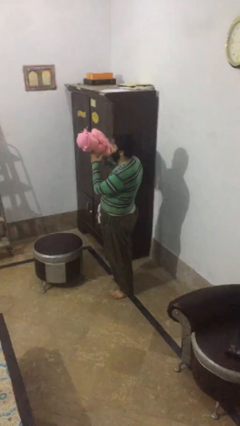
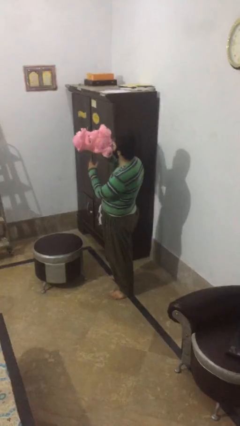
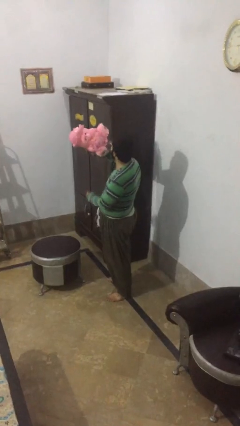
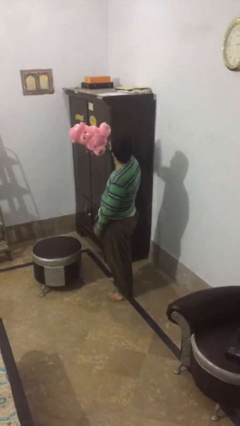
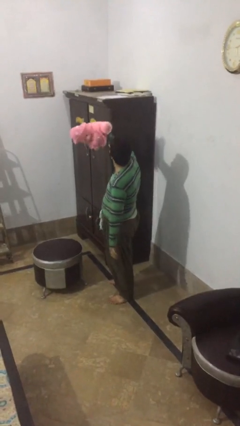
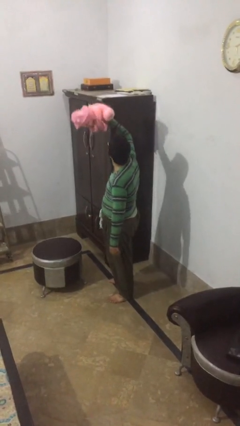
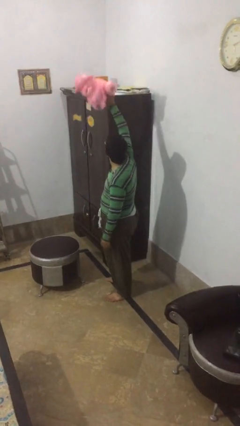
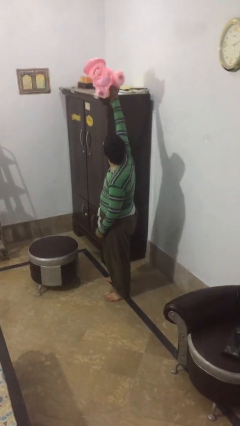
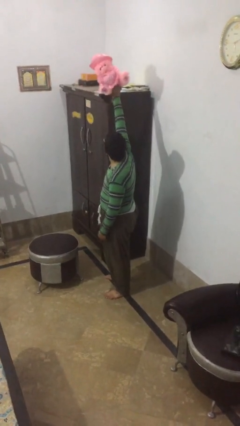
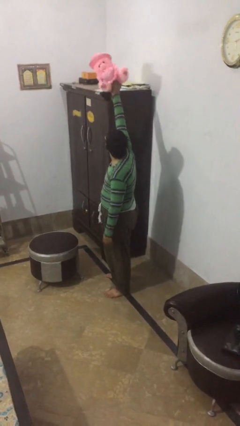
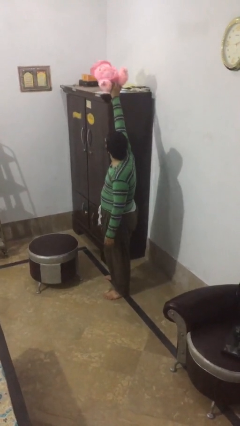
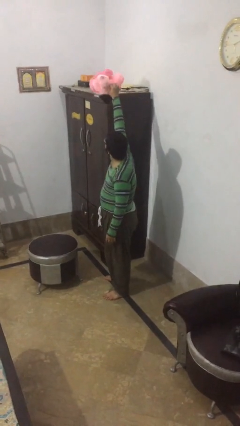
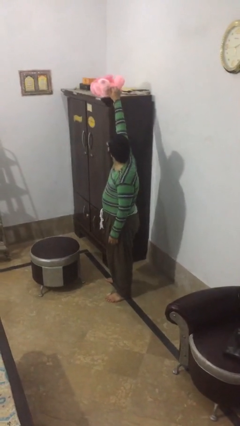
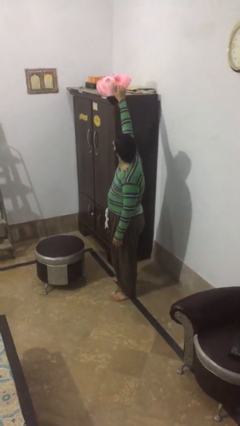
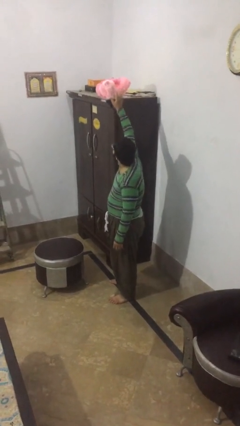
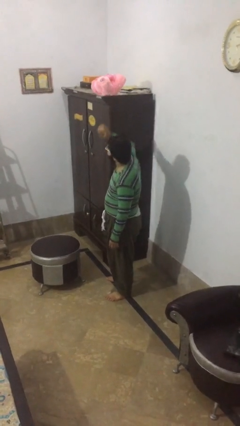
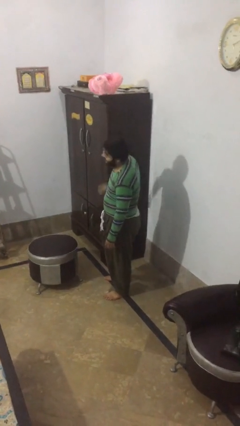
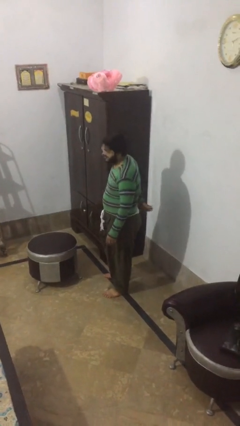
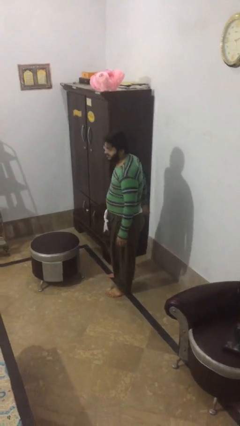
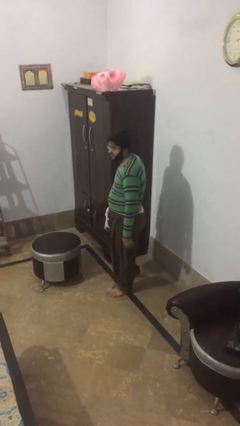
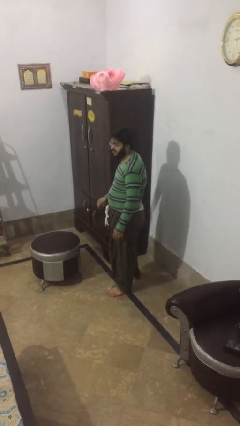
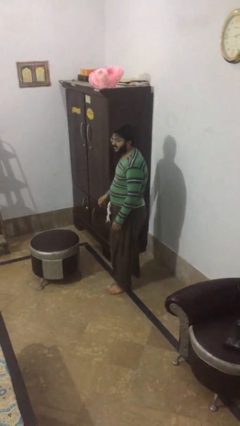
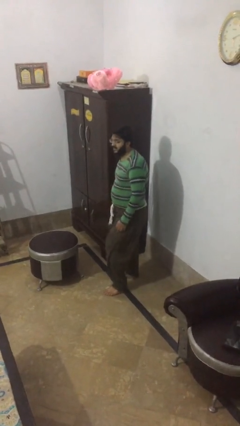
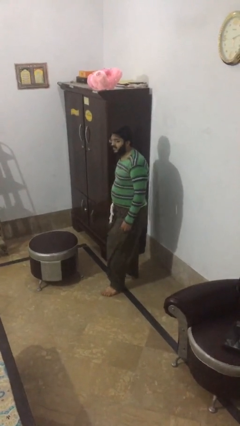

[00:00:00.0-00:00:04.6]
person puts down object on shelf

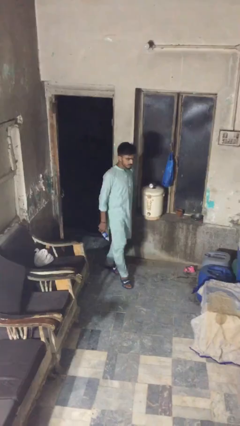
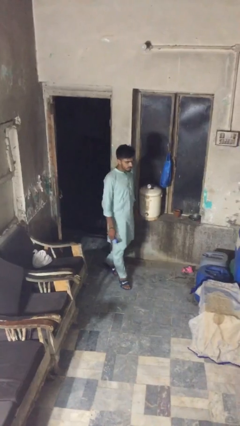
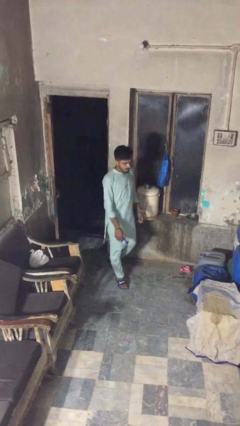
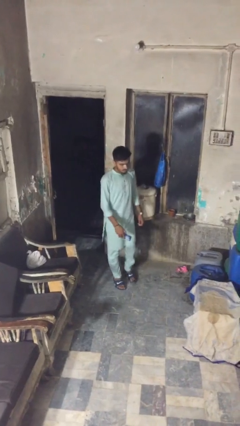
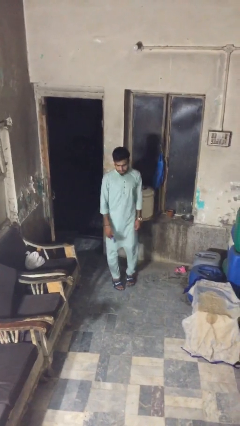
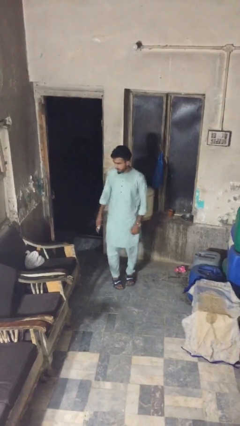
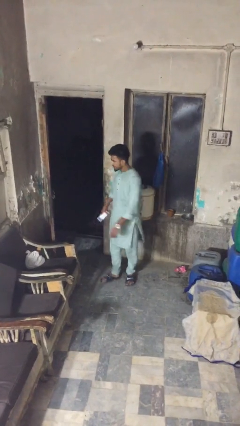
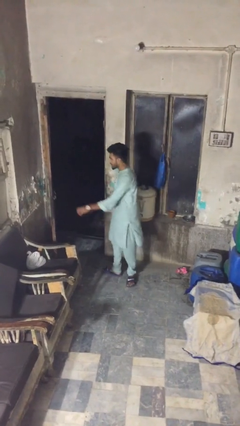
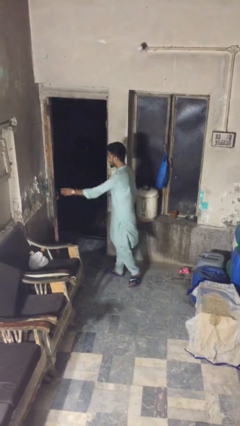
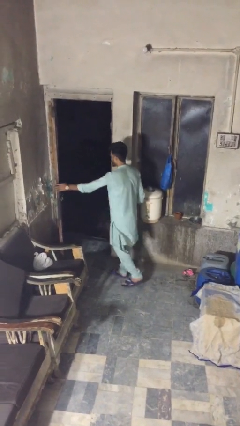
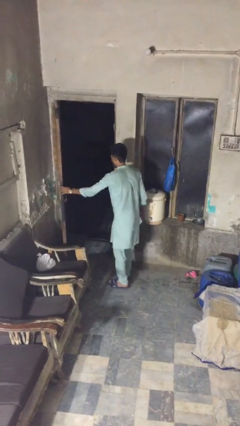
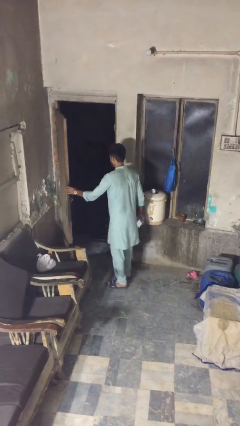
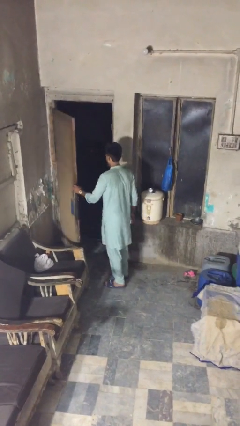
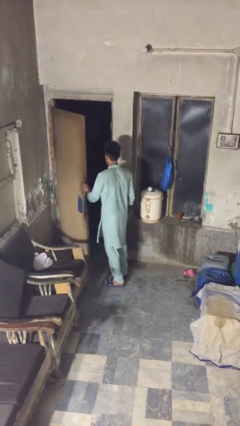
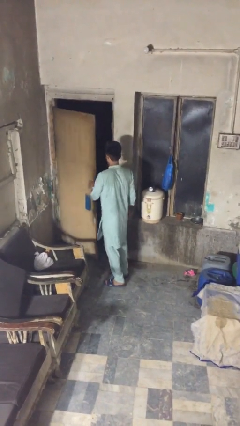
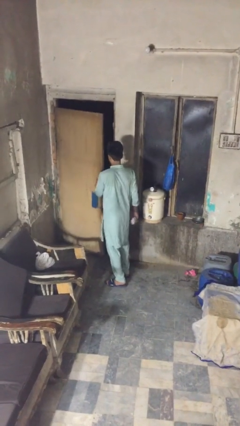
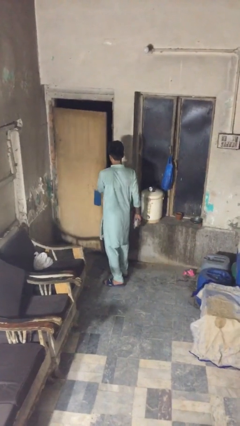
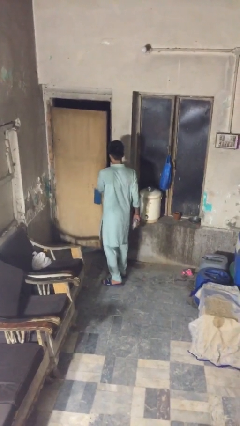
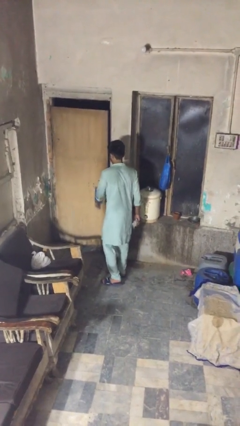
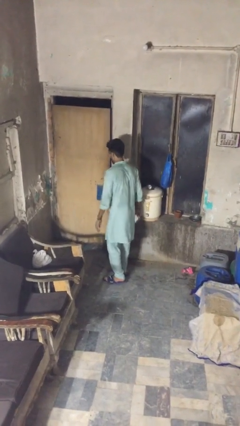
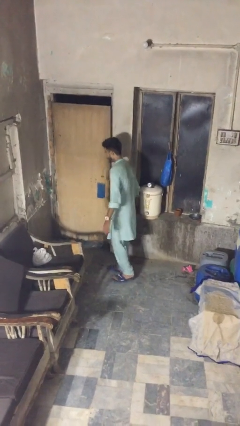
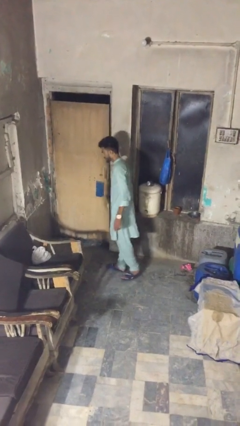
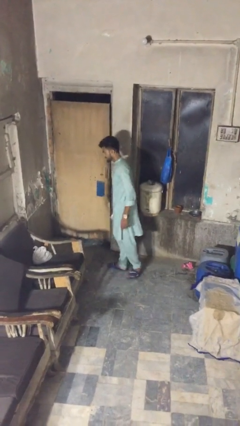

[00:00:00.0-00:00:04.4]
person closes facility door

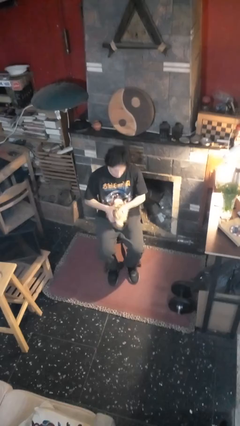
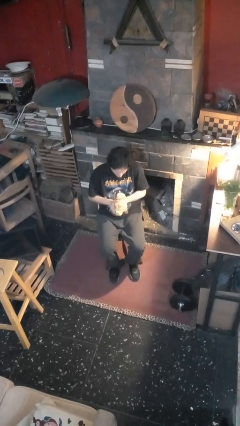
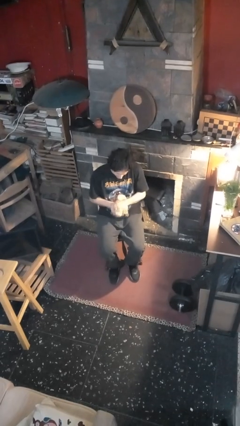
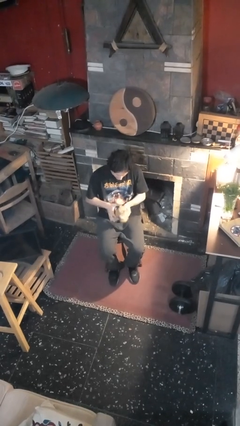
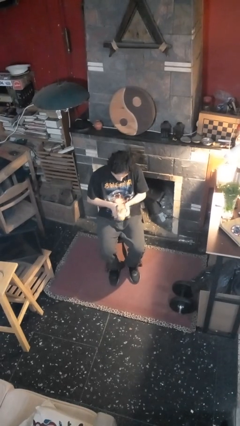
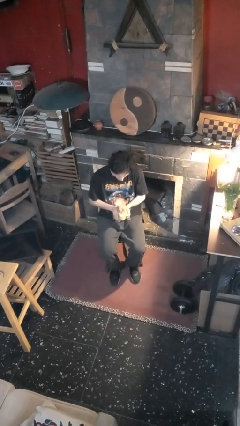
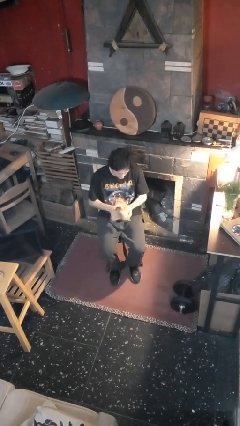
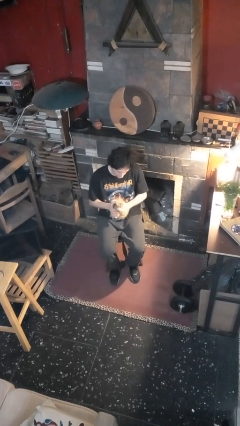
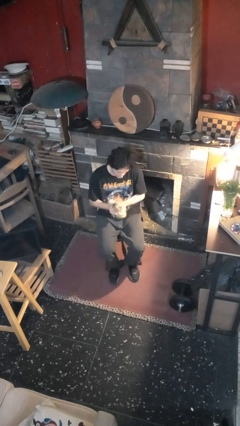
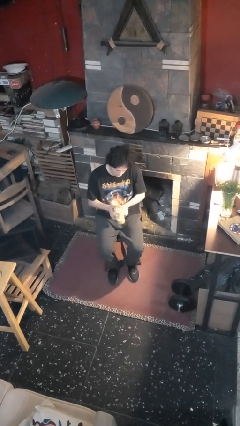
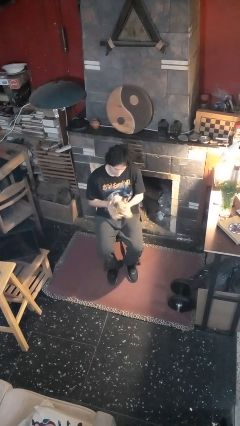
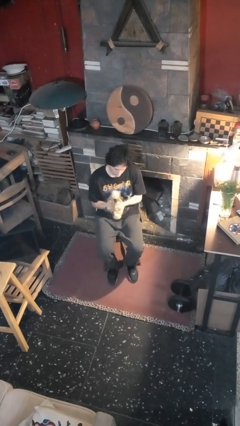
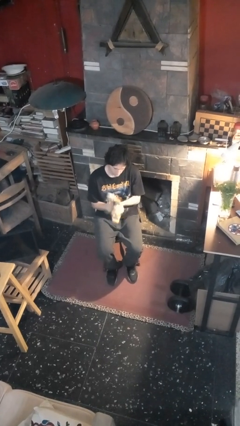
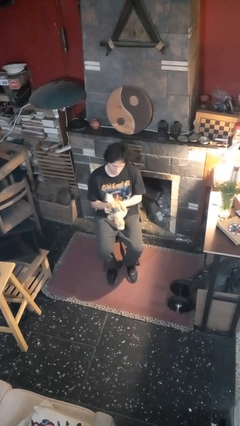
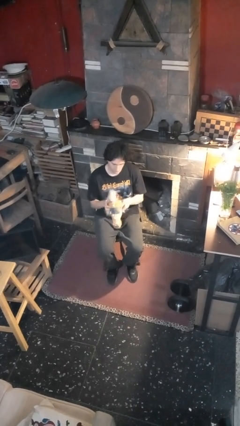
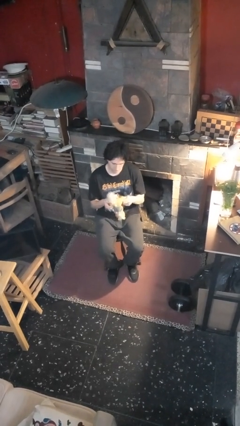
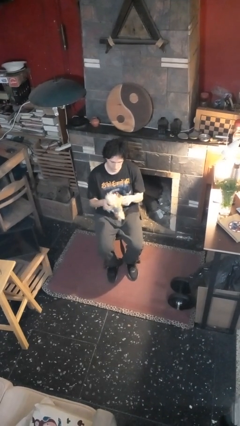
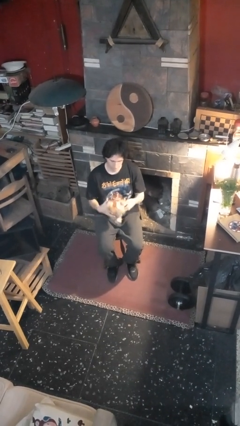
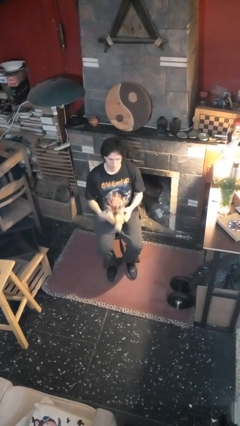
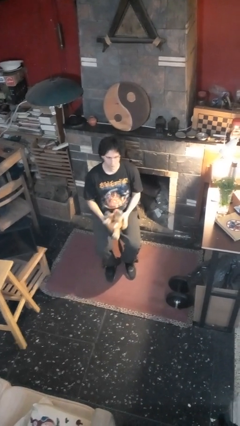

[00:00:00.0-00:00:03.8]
person squeezes object

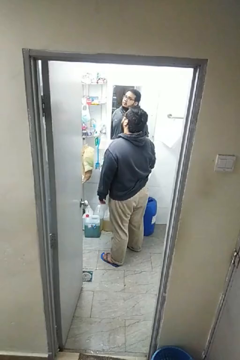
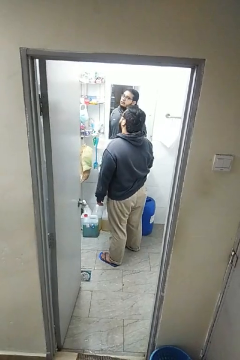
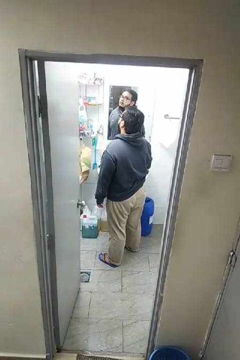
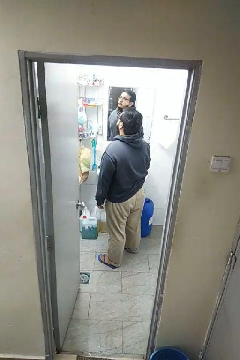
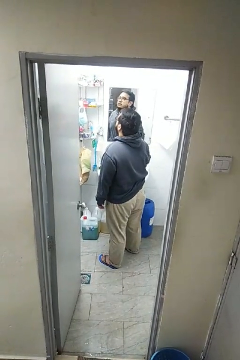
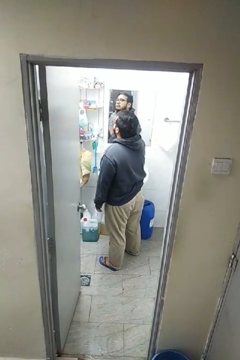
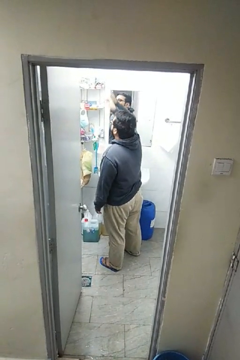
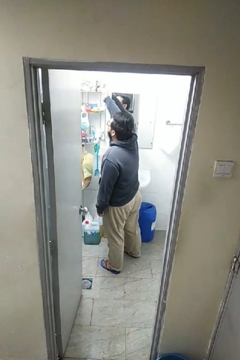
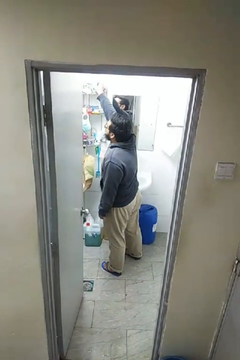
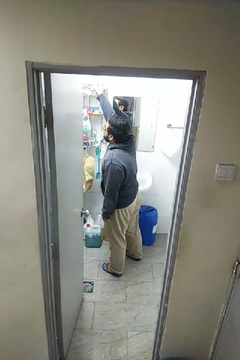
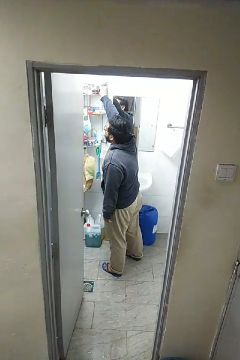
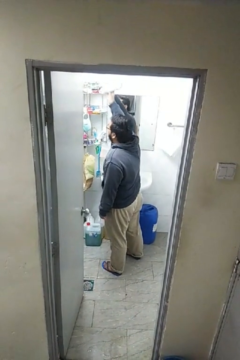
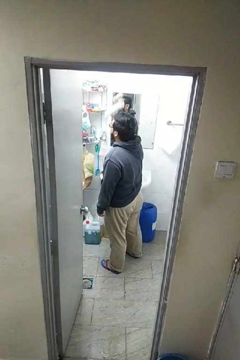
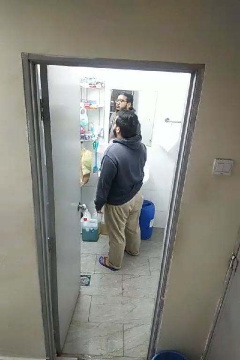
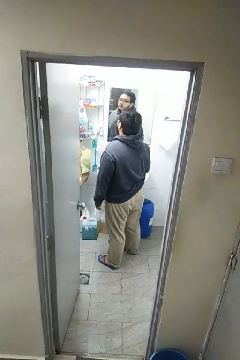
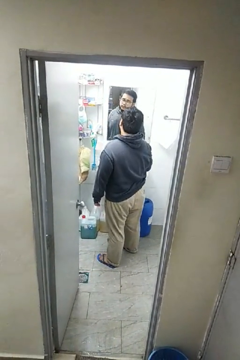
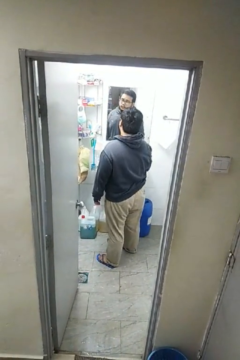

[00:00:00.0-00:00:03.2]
person picks up object from countertop

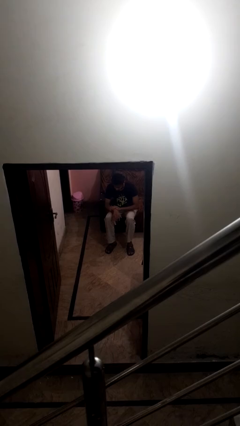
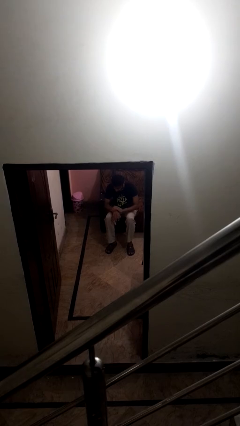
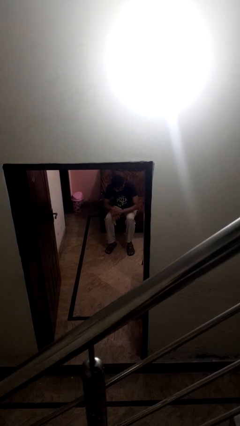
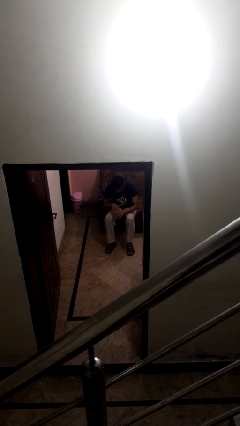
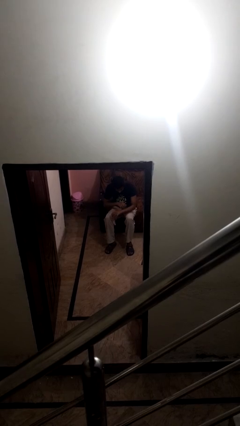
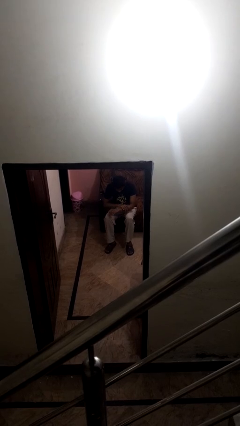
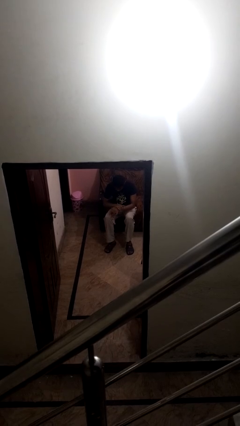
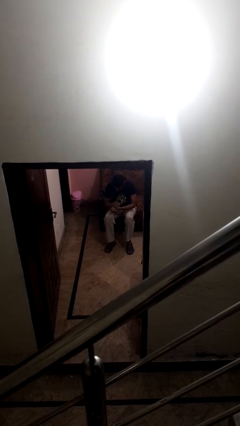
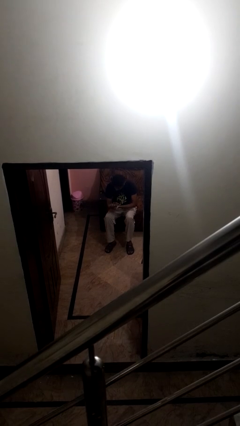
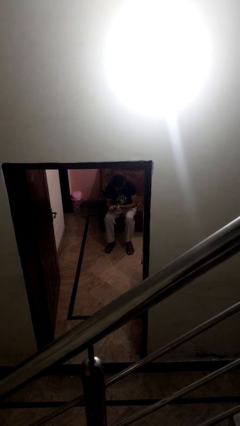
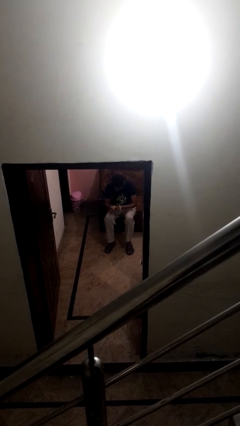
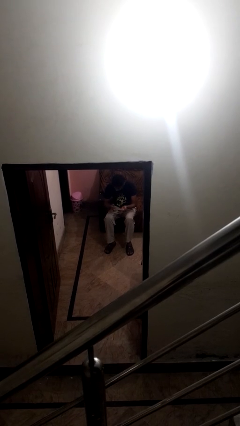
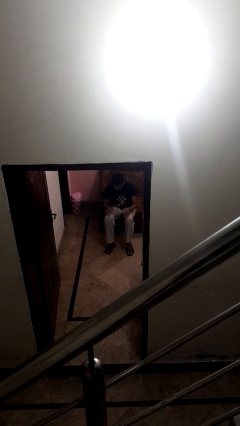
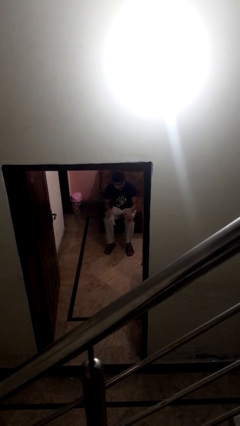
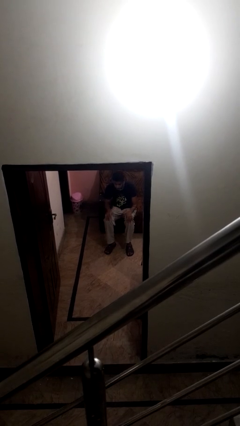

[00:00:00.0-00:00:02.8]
person looks at hands in lap
